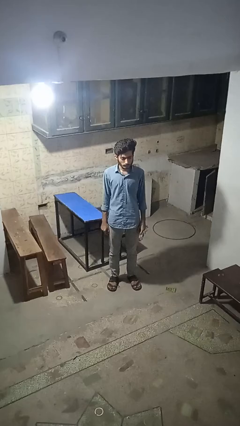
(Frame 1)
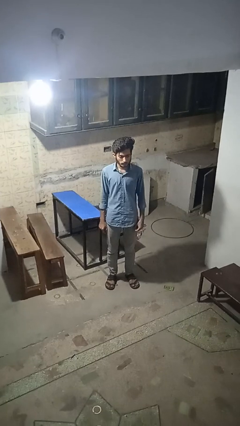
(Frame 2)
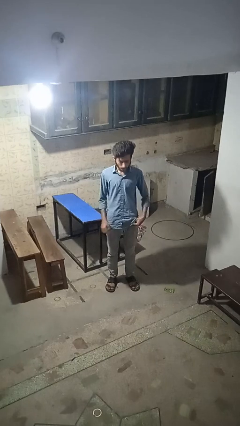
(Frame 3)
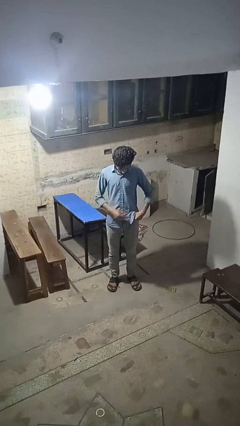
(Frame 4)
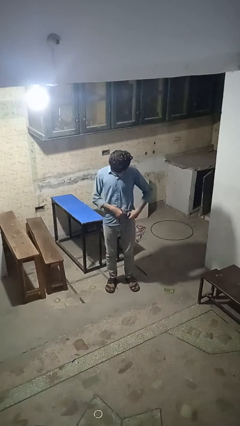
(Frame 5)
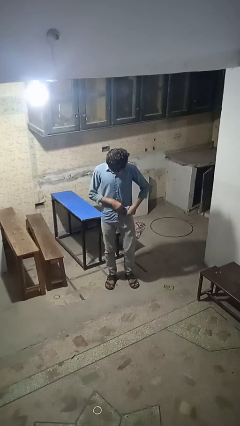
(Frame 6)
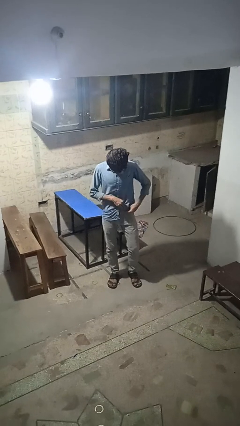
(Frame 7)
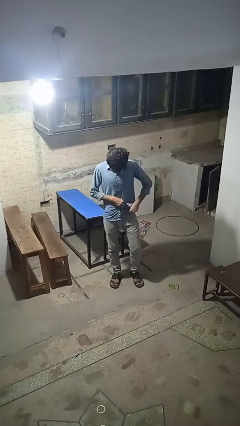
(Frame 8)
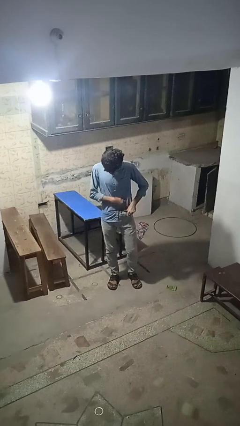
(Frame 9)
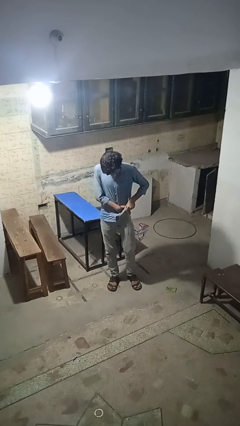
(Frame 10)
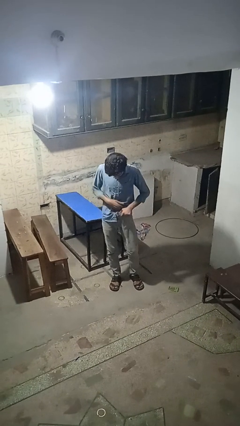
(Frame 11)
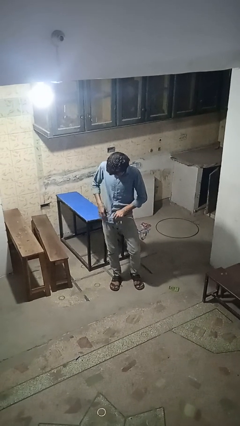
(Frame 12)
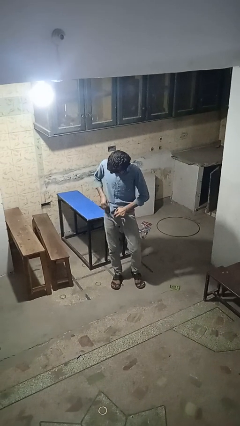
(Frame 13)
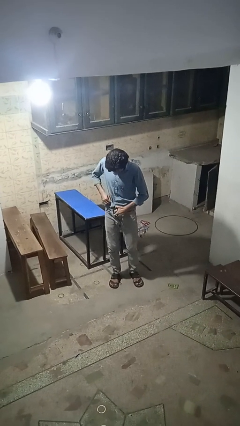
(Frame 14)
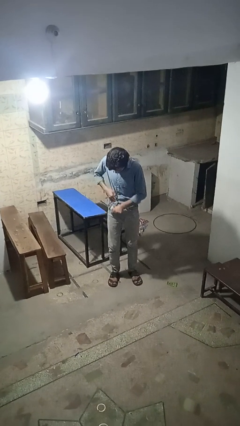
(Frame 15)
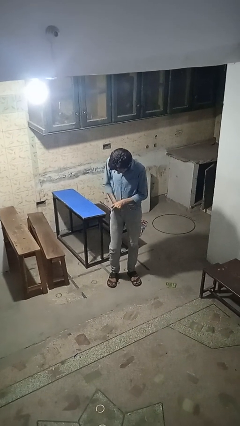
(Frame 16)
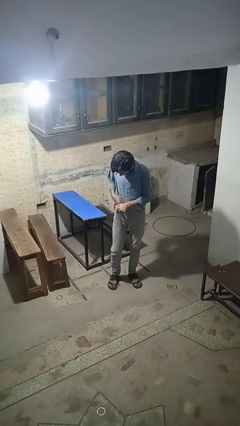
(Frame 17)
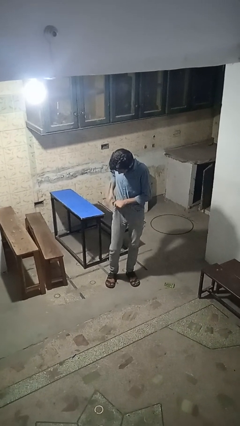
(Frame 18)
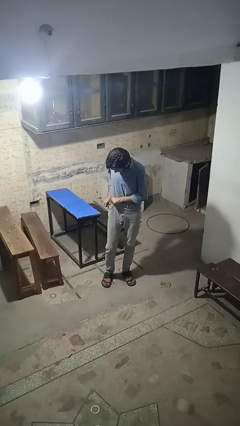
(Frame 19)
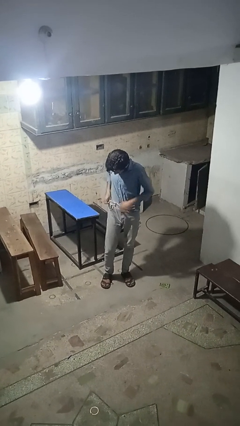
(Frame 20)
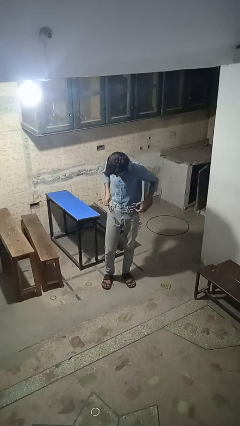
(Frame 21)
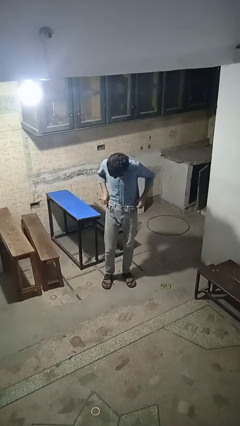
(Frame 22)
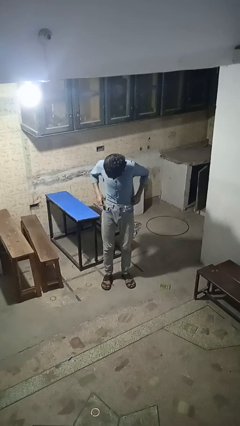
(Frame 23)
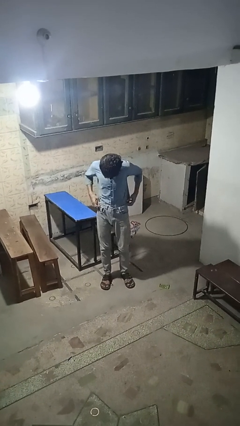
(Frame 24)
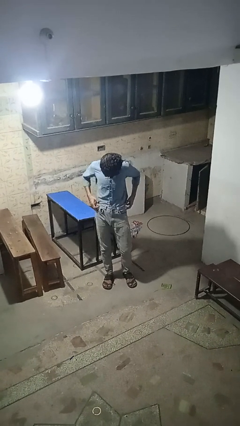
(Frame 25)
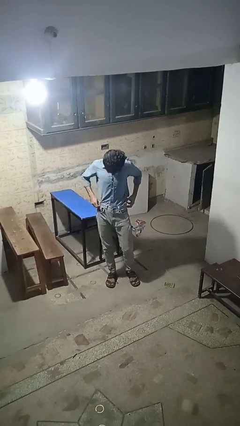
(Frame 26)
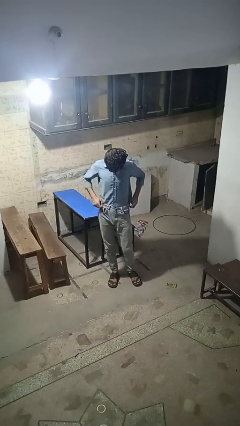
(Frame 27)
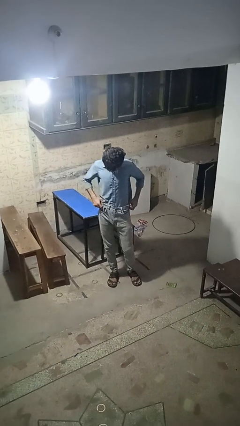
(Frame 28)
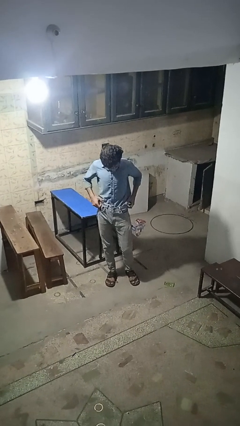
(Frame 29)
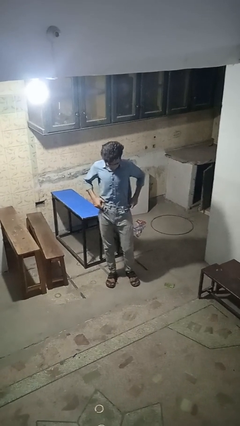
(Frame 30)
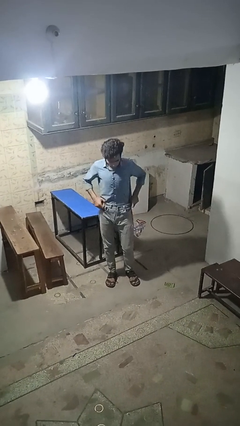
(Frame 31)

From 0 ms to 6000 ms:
person tucks in shirt

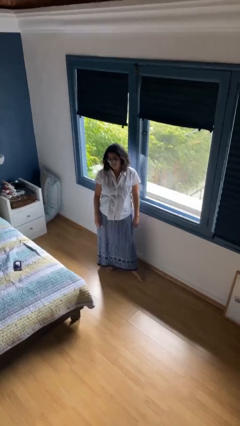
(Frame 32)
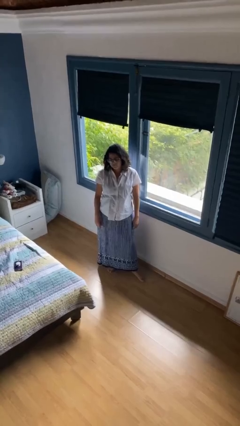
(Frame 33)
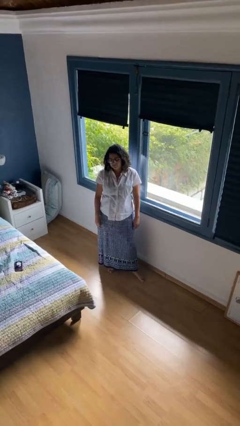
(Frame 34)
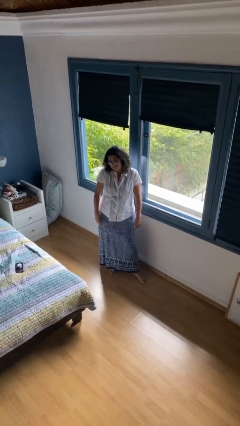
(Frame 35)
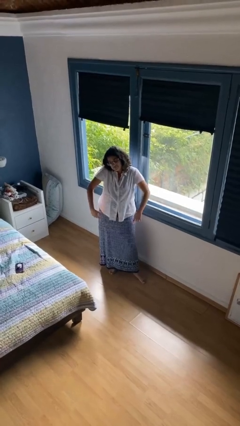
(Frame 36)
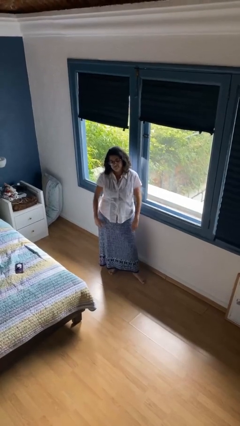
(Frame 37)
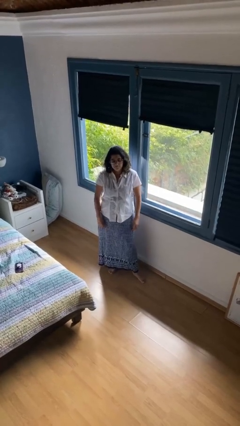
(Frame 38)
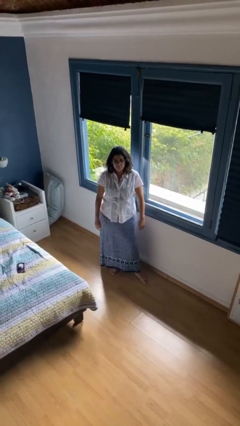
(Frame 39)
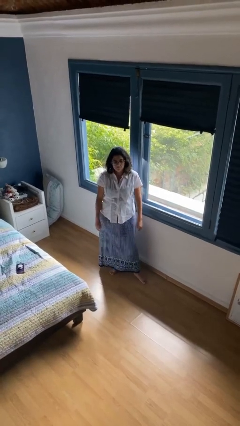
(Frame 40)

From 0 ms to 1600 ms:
person shrugs

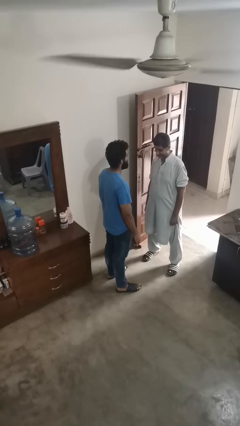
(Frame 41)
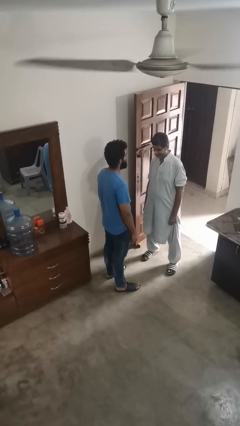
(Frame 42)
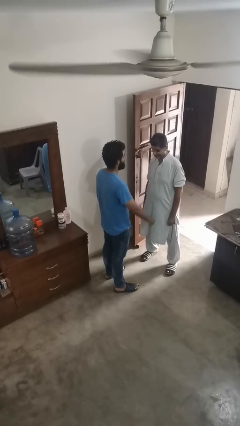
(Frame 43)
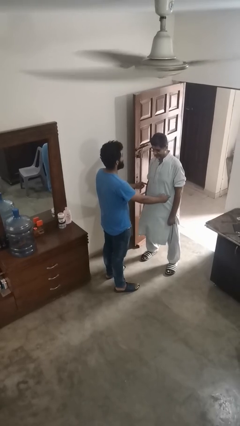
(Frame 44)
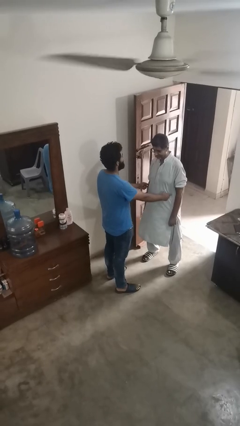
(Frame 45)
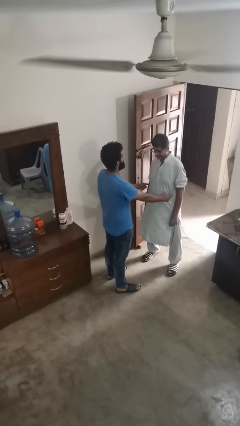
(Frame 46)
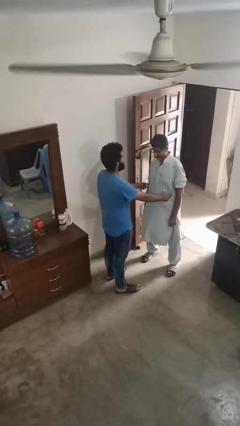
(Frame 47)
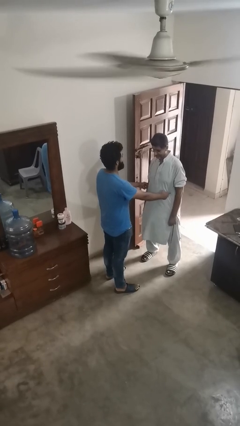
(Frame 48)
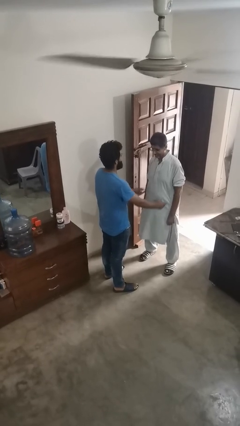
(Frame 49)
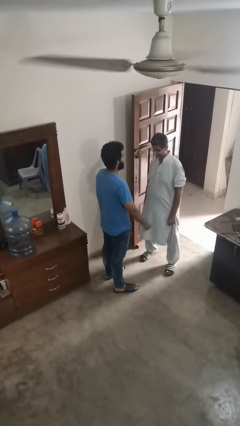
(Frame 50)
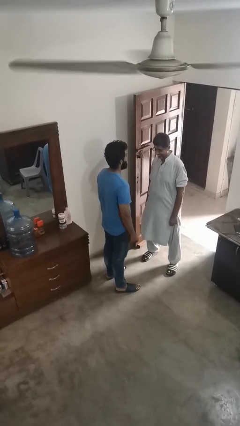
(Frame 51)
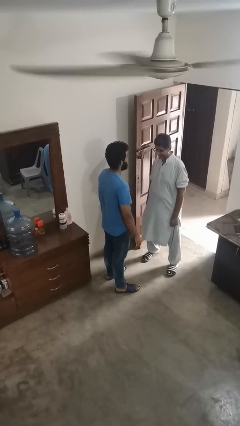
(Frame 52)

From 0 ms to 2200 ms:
person tickles person

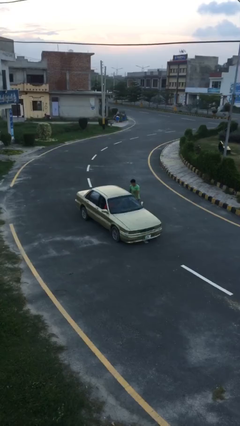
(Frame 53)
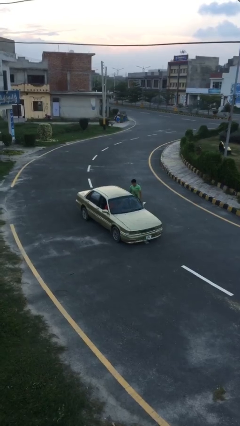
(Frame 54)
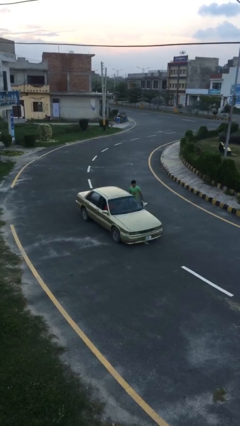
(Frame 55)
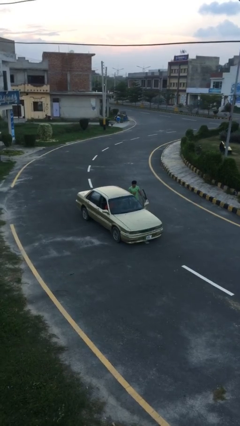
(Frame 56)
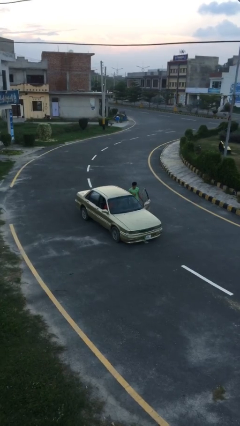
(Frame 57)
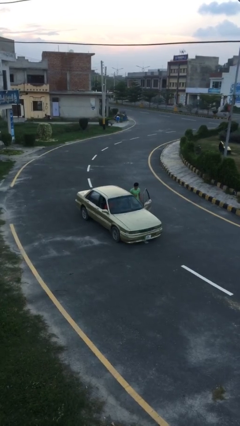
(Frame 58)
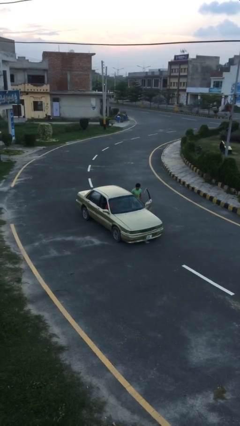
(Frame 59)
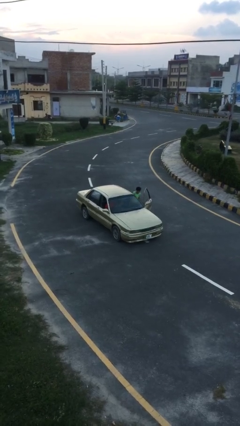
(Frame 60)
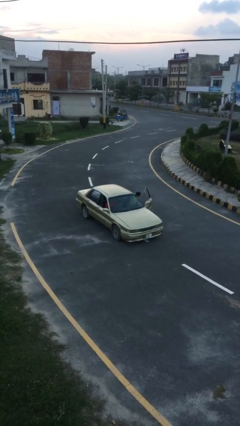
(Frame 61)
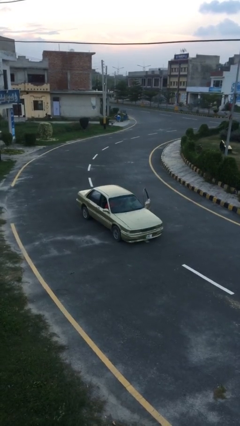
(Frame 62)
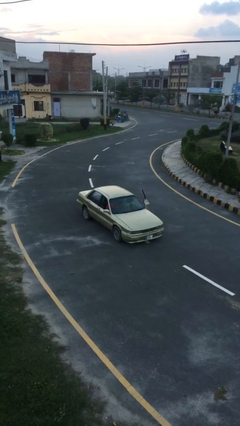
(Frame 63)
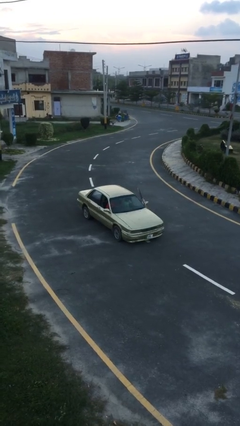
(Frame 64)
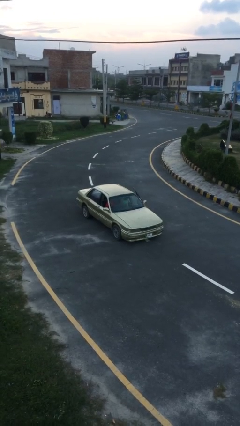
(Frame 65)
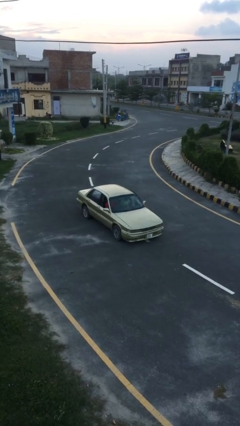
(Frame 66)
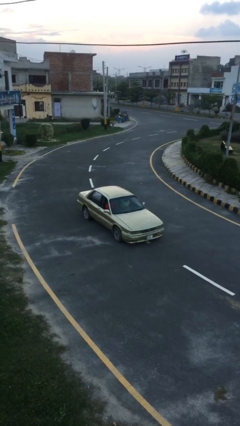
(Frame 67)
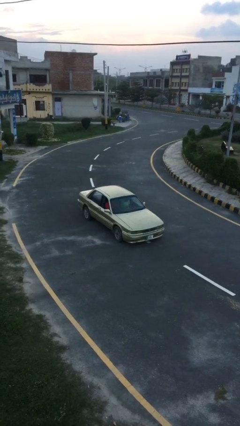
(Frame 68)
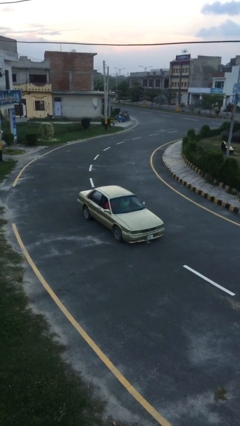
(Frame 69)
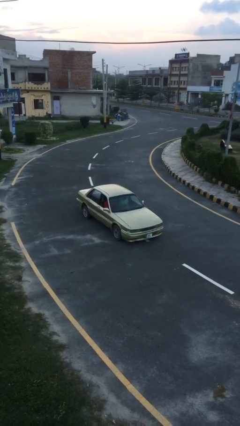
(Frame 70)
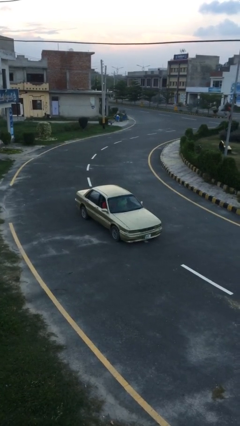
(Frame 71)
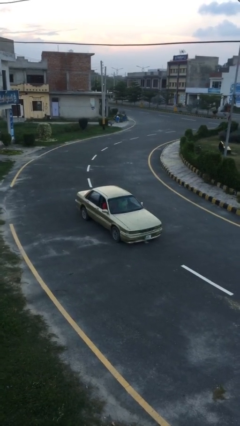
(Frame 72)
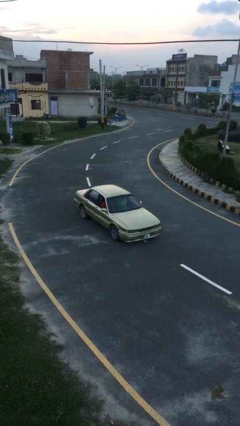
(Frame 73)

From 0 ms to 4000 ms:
car picks up person

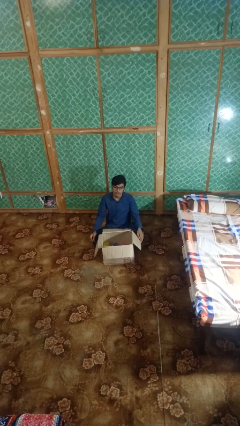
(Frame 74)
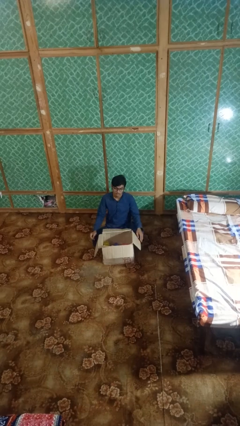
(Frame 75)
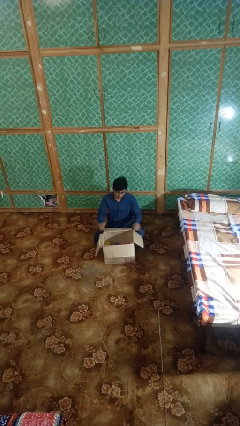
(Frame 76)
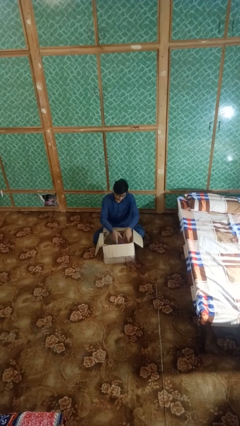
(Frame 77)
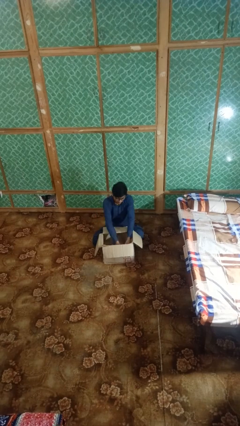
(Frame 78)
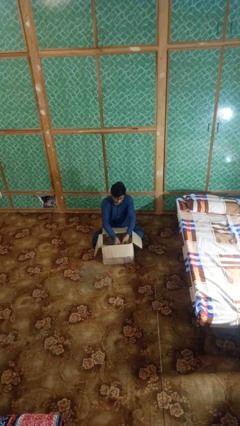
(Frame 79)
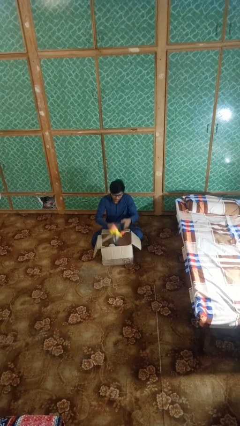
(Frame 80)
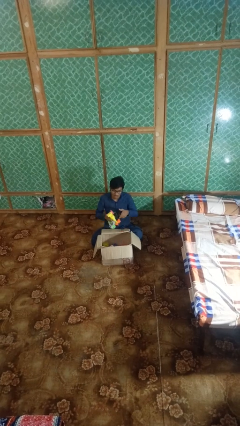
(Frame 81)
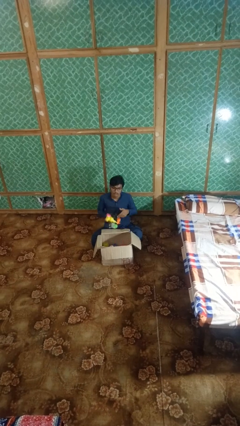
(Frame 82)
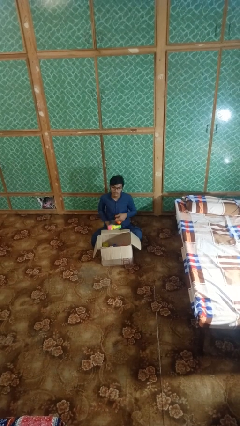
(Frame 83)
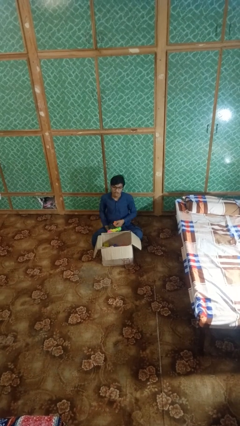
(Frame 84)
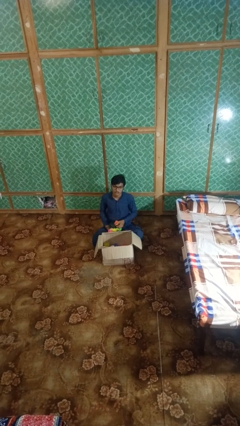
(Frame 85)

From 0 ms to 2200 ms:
person takes object from box

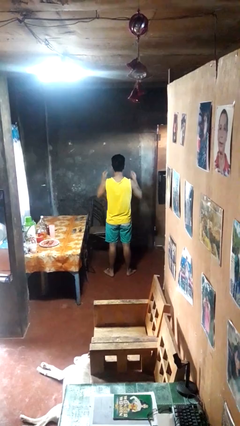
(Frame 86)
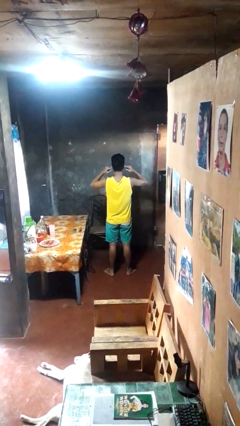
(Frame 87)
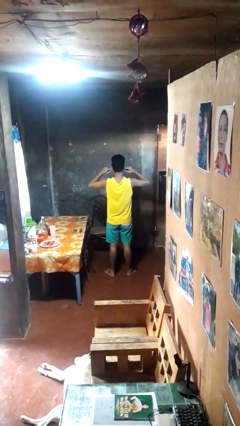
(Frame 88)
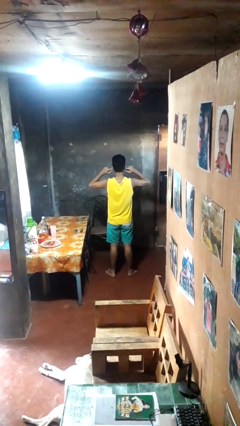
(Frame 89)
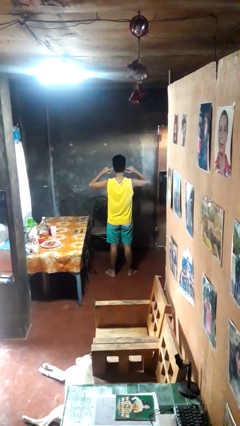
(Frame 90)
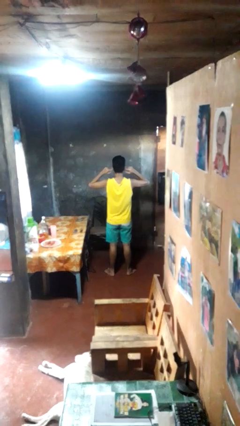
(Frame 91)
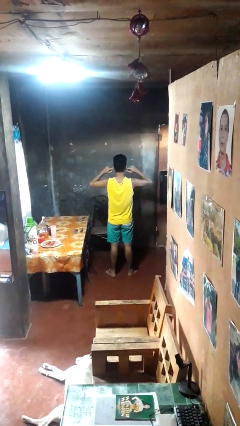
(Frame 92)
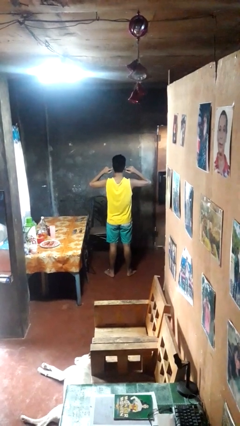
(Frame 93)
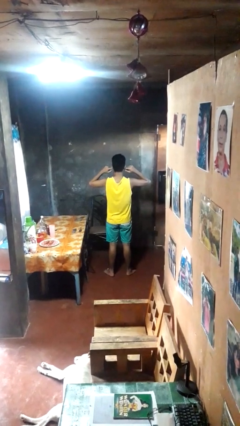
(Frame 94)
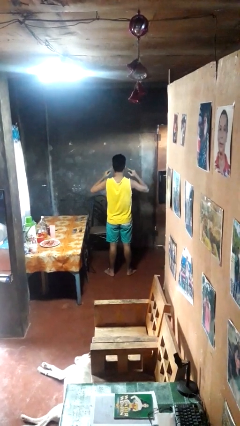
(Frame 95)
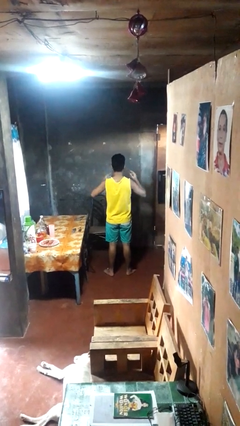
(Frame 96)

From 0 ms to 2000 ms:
person puts fingers in ear
